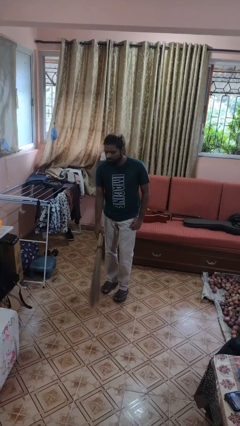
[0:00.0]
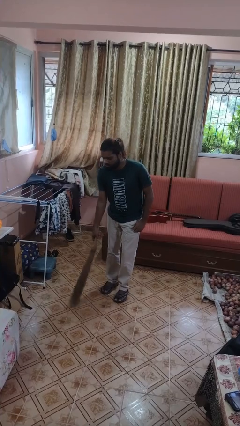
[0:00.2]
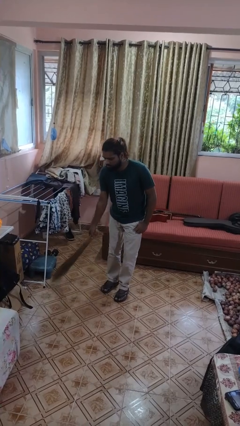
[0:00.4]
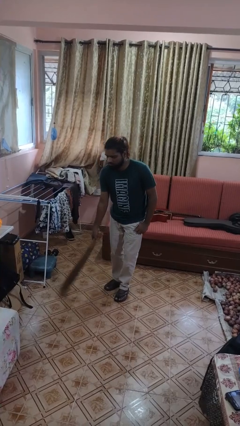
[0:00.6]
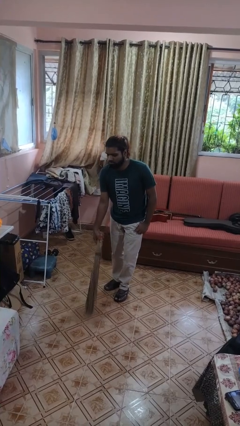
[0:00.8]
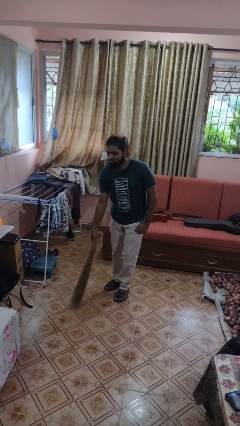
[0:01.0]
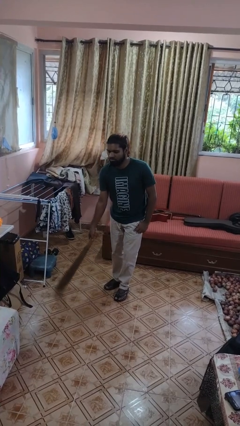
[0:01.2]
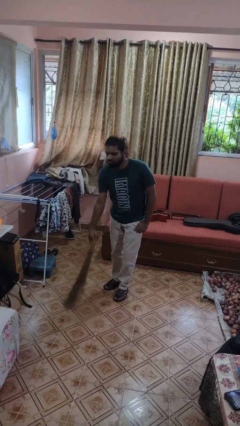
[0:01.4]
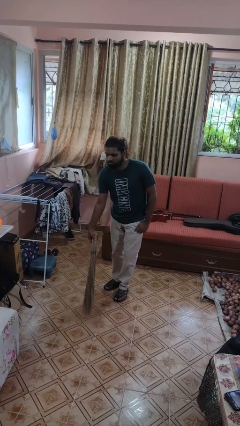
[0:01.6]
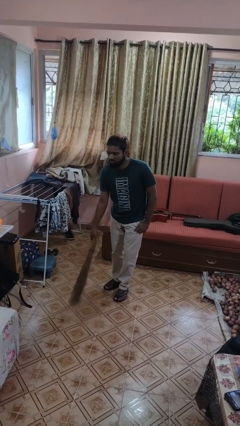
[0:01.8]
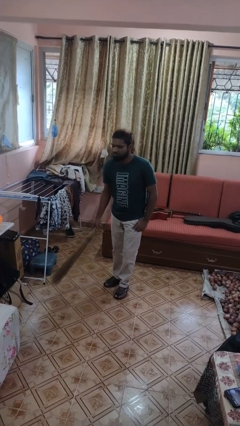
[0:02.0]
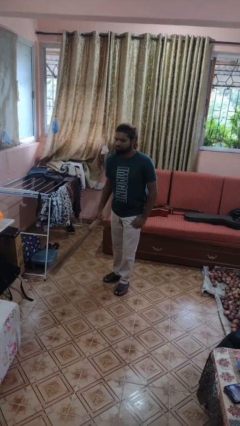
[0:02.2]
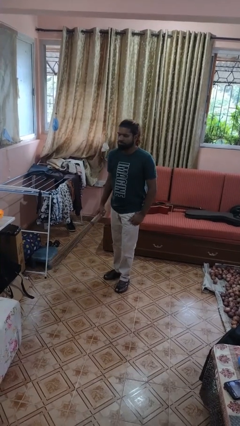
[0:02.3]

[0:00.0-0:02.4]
person sweeps floor

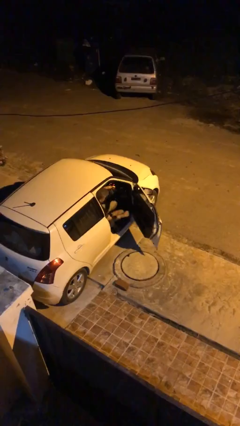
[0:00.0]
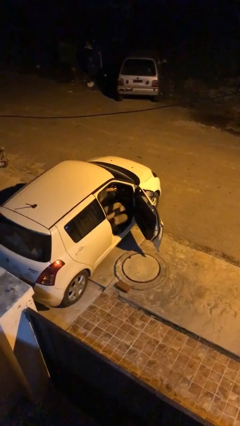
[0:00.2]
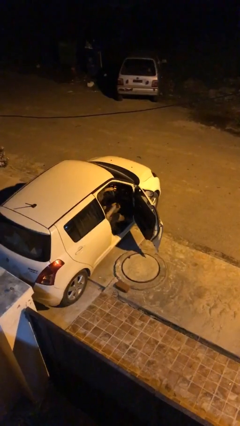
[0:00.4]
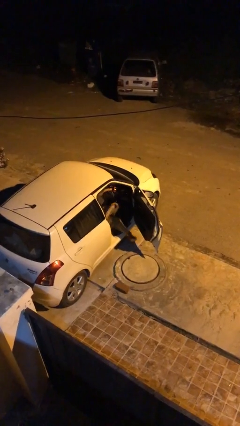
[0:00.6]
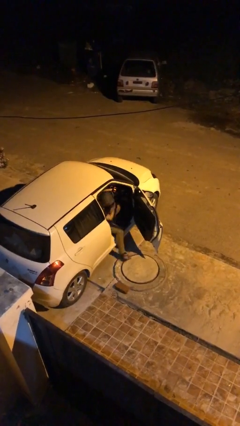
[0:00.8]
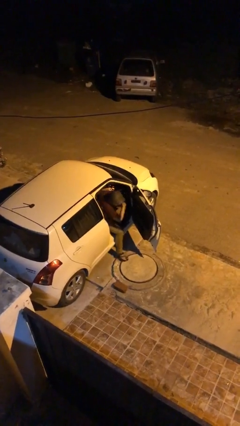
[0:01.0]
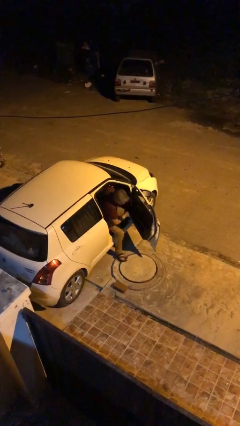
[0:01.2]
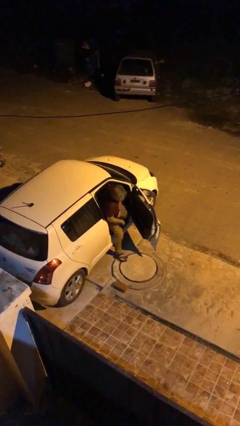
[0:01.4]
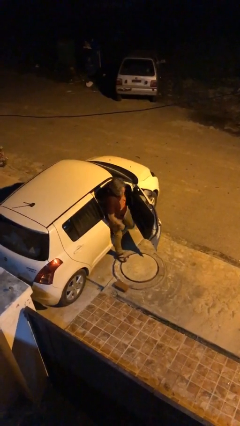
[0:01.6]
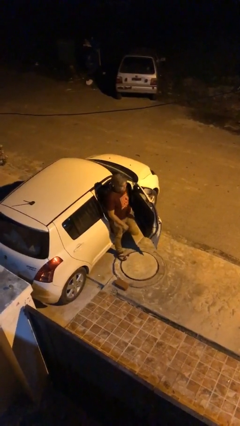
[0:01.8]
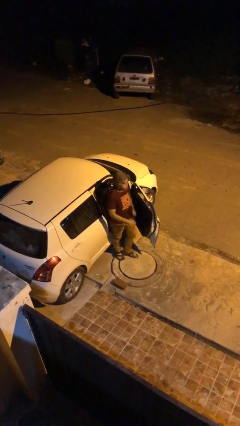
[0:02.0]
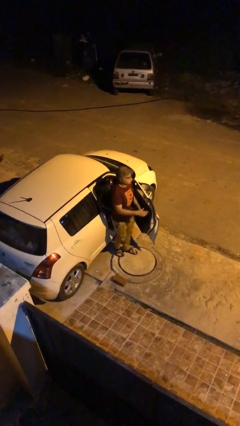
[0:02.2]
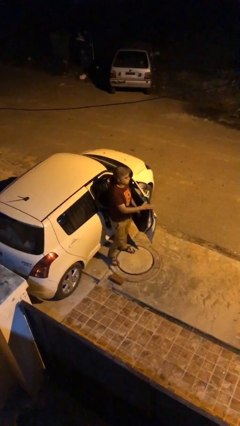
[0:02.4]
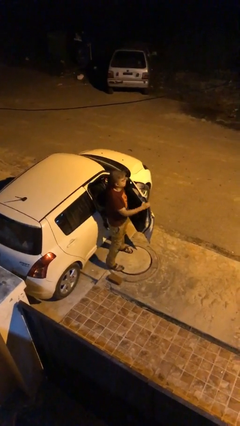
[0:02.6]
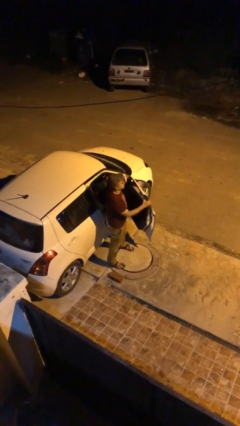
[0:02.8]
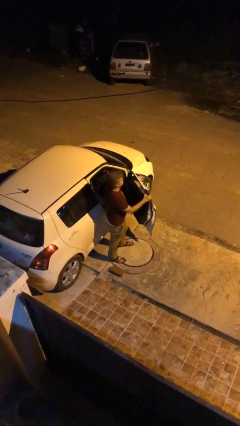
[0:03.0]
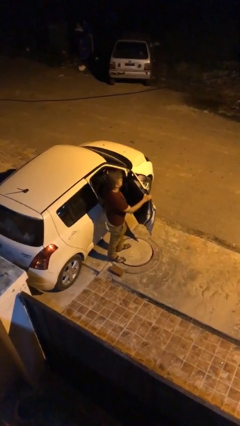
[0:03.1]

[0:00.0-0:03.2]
person exits car

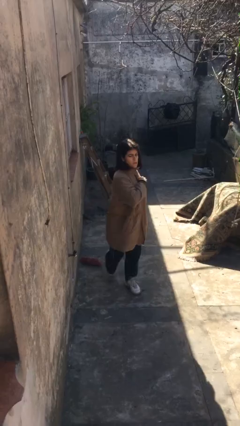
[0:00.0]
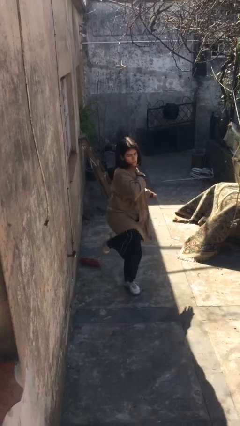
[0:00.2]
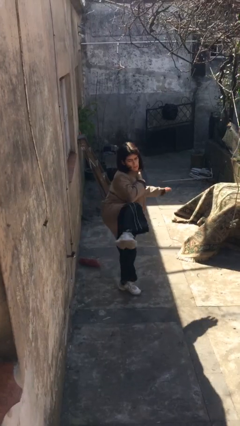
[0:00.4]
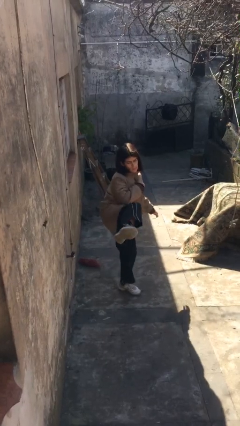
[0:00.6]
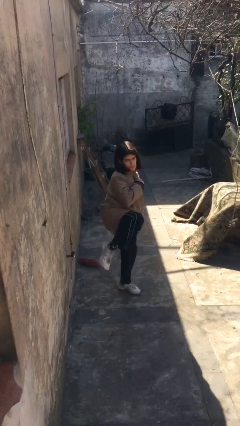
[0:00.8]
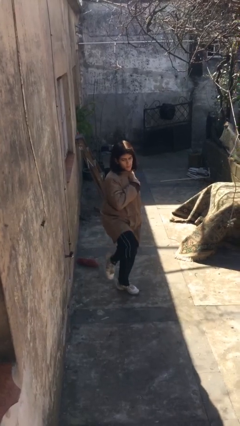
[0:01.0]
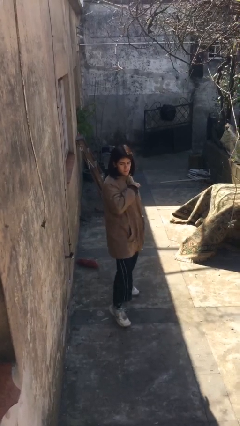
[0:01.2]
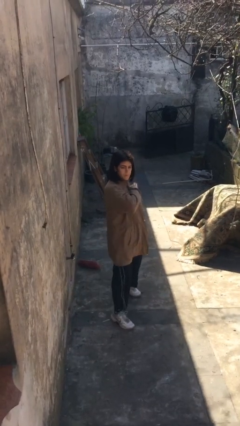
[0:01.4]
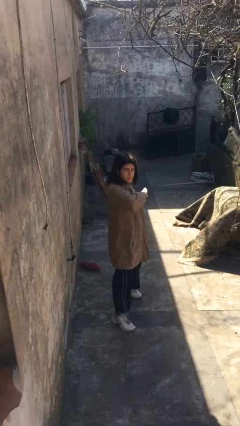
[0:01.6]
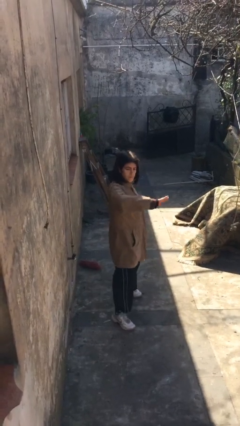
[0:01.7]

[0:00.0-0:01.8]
person karate kicks

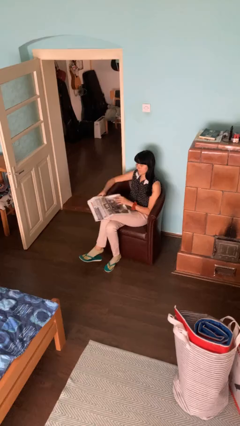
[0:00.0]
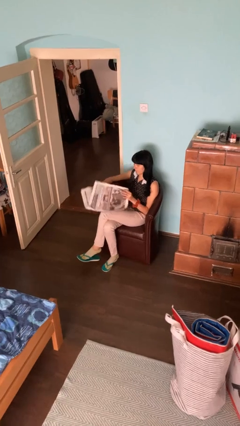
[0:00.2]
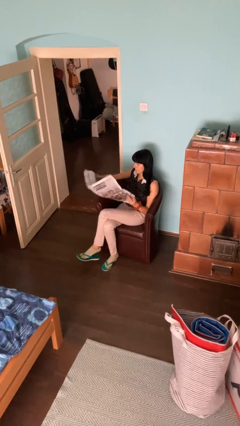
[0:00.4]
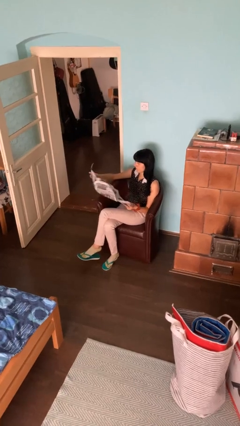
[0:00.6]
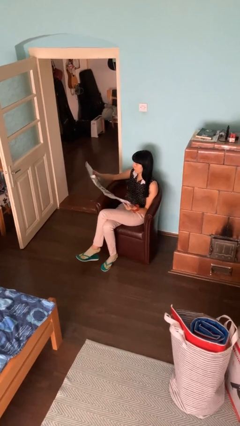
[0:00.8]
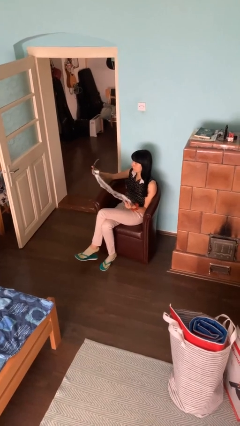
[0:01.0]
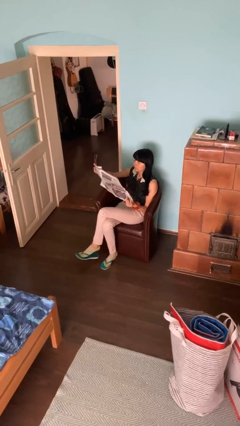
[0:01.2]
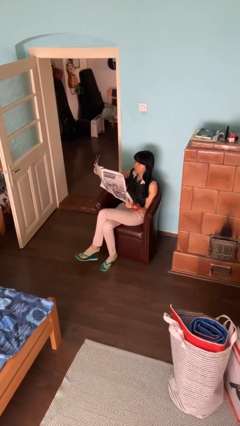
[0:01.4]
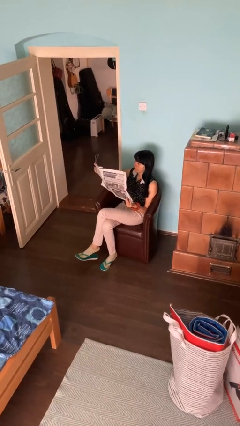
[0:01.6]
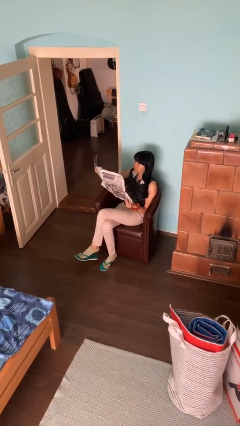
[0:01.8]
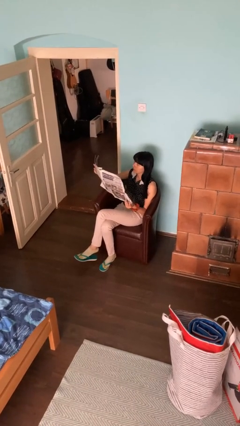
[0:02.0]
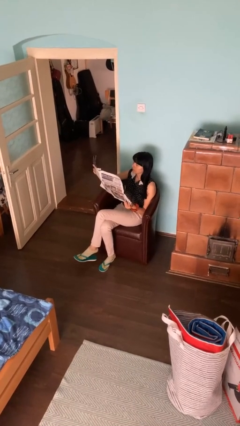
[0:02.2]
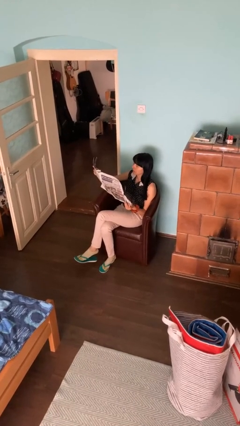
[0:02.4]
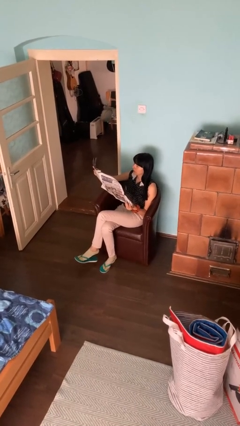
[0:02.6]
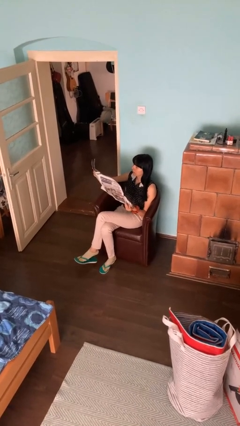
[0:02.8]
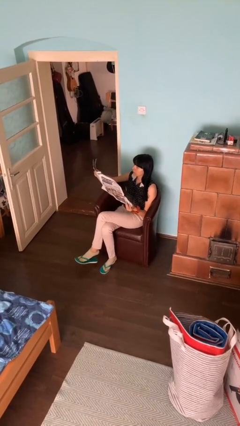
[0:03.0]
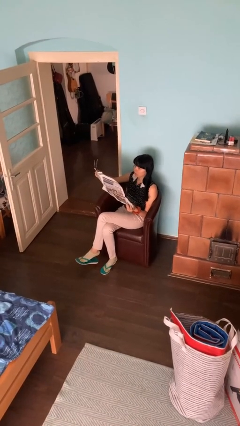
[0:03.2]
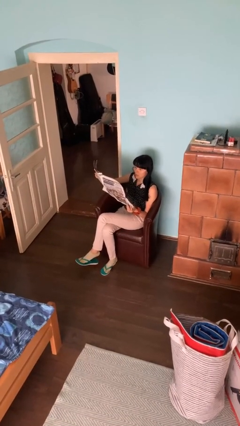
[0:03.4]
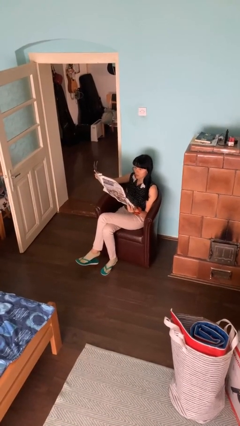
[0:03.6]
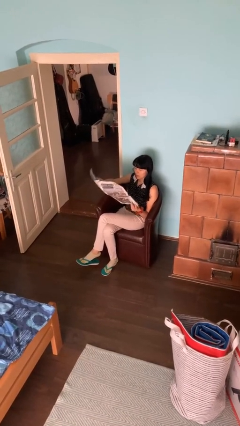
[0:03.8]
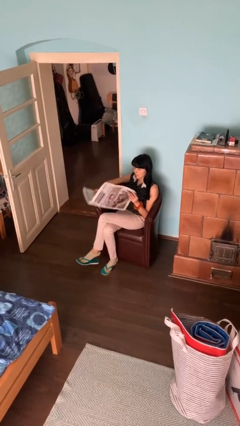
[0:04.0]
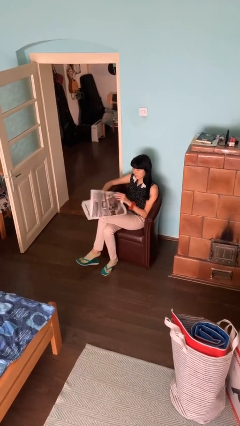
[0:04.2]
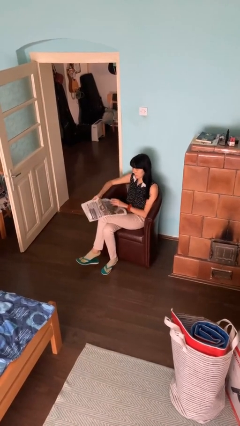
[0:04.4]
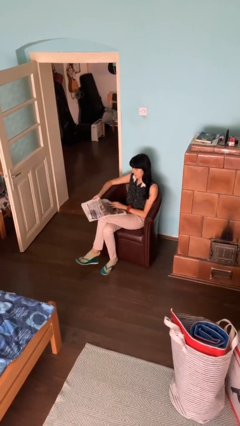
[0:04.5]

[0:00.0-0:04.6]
person reads newspaper

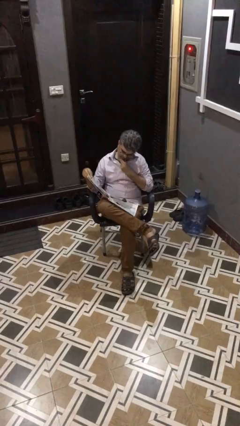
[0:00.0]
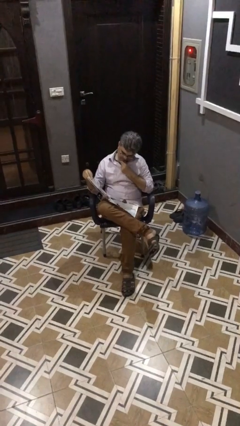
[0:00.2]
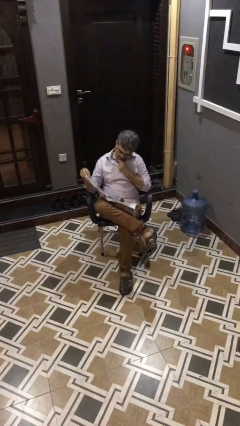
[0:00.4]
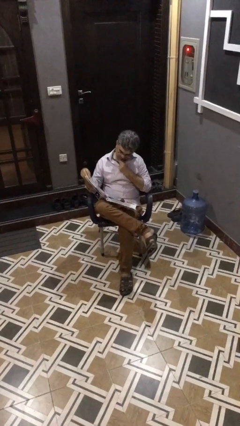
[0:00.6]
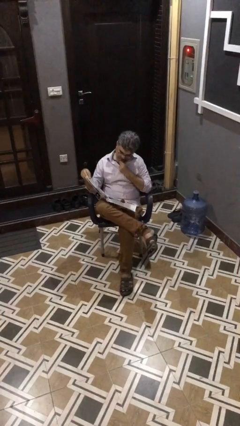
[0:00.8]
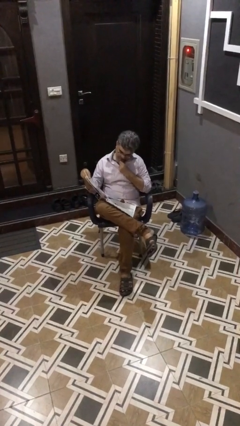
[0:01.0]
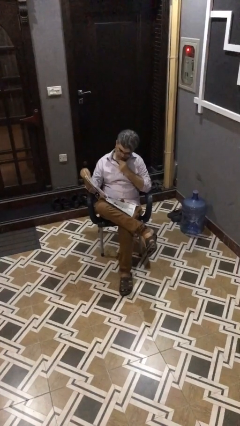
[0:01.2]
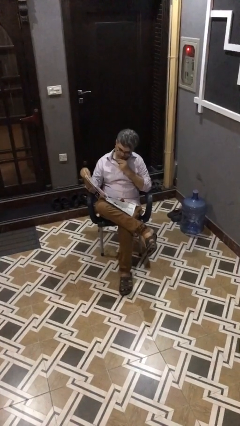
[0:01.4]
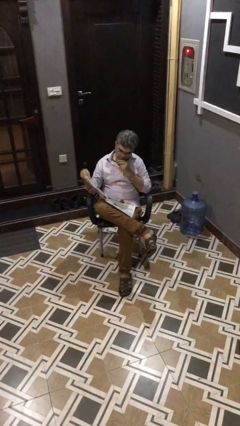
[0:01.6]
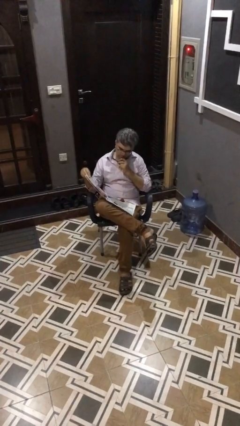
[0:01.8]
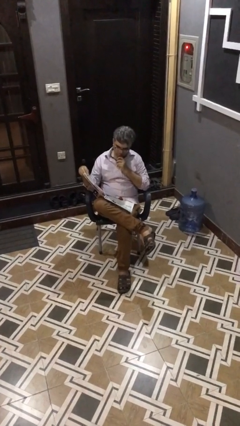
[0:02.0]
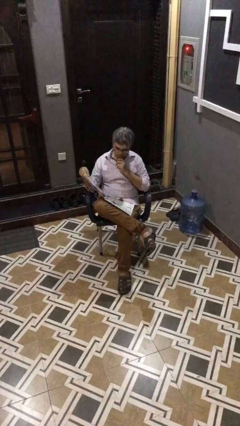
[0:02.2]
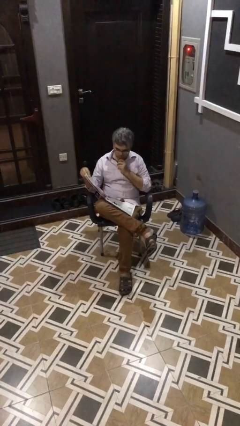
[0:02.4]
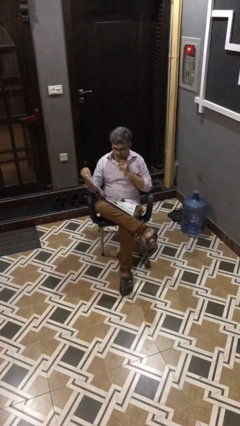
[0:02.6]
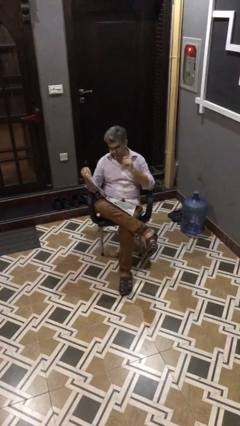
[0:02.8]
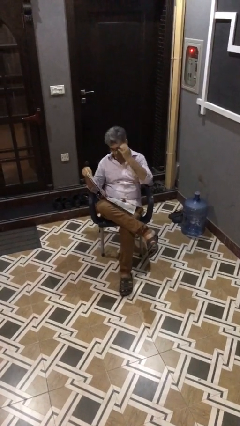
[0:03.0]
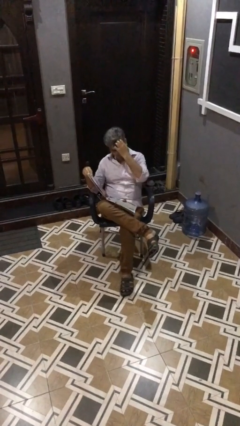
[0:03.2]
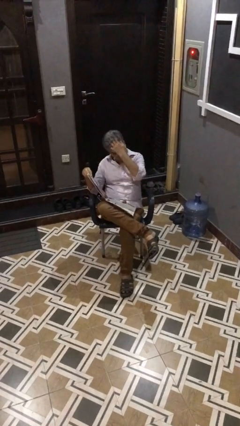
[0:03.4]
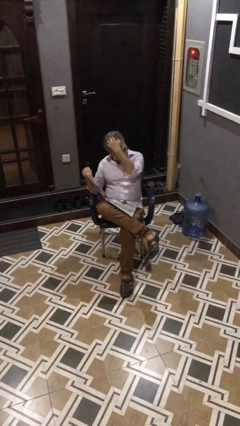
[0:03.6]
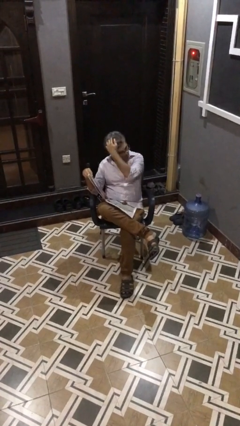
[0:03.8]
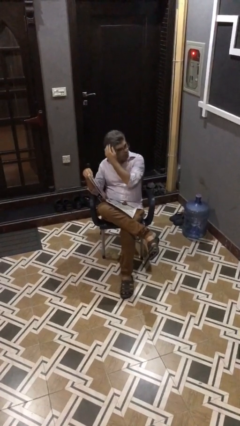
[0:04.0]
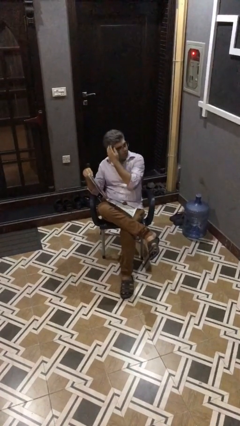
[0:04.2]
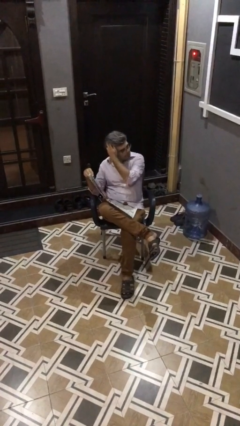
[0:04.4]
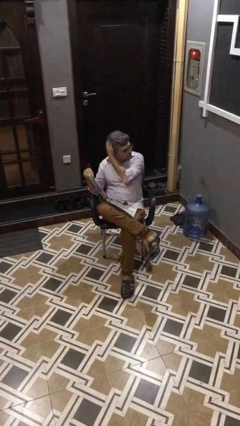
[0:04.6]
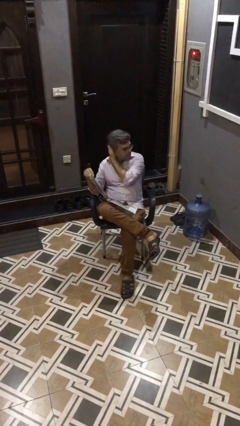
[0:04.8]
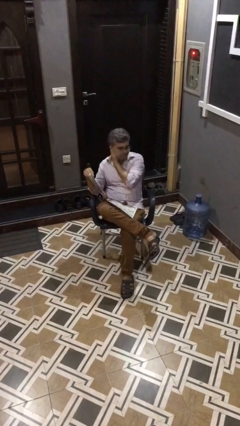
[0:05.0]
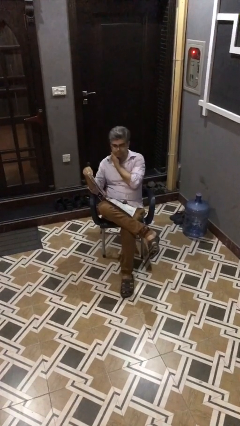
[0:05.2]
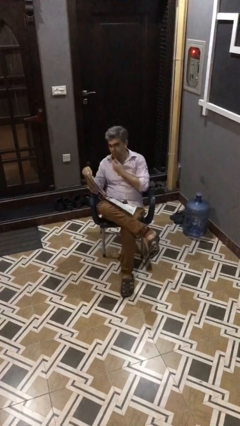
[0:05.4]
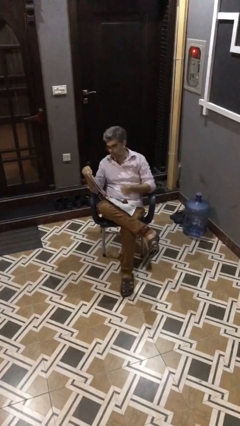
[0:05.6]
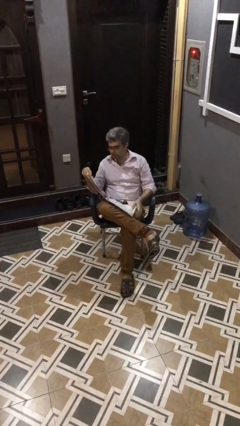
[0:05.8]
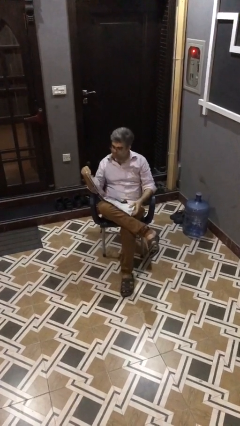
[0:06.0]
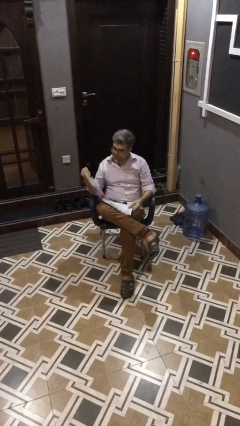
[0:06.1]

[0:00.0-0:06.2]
person reads document
